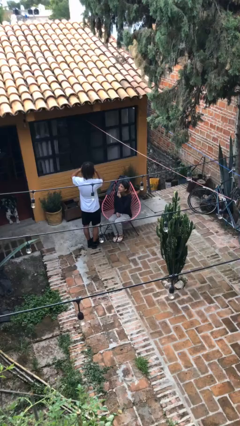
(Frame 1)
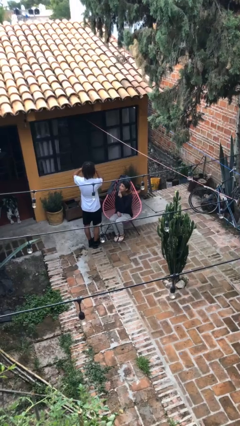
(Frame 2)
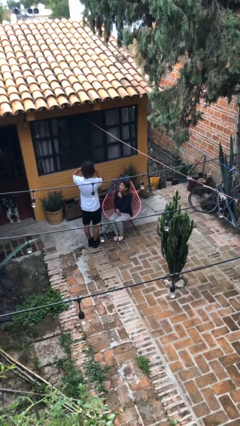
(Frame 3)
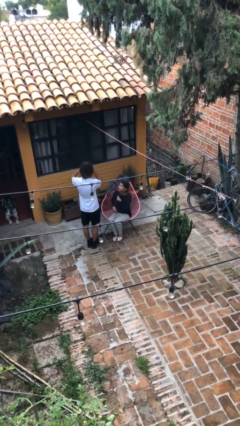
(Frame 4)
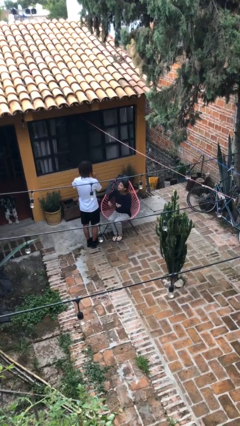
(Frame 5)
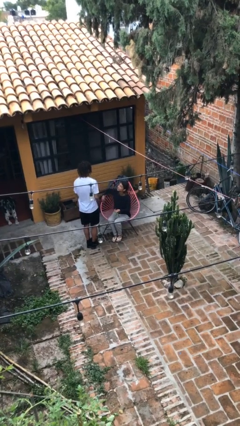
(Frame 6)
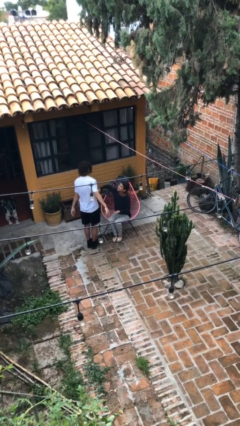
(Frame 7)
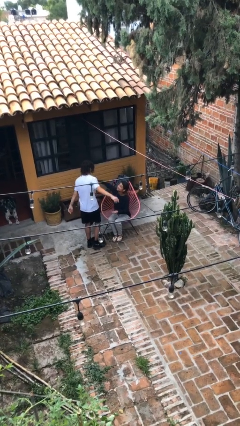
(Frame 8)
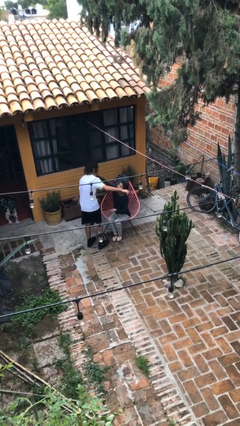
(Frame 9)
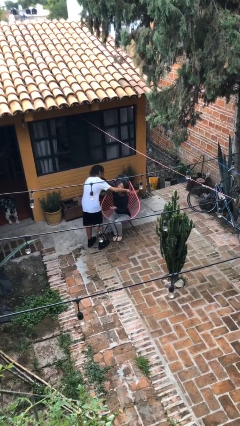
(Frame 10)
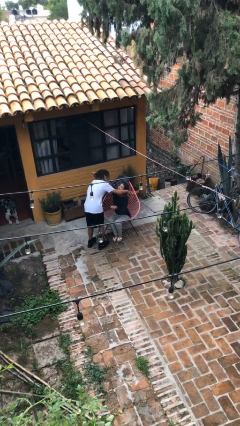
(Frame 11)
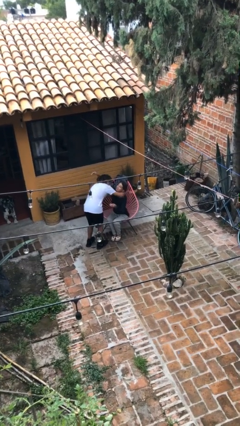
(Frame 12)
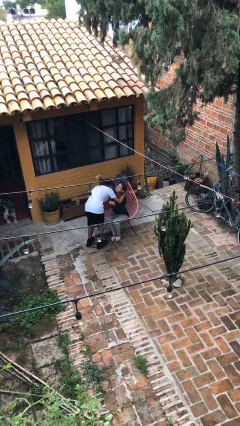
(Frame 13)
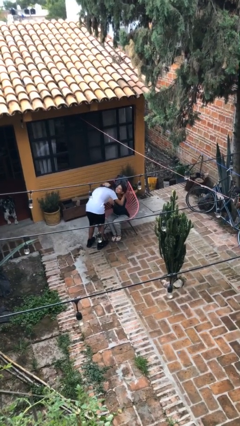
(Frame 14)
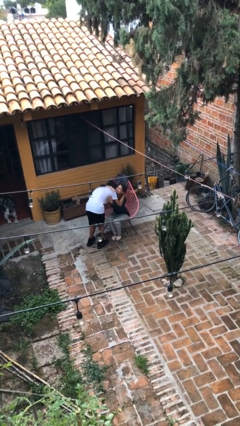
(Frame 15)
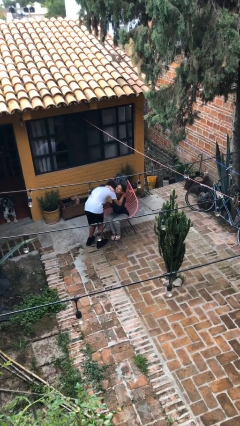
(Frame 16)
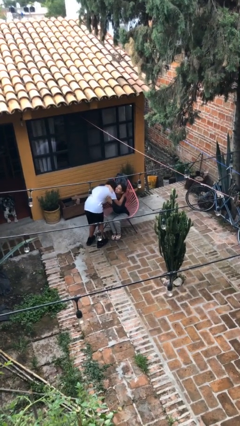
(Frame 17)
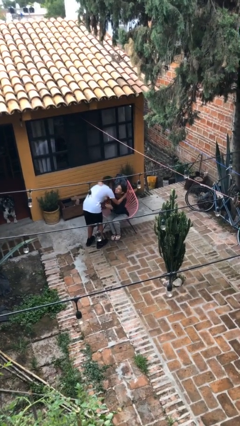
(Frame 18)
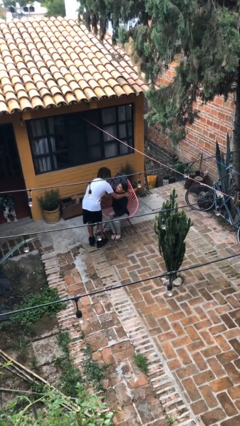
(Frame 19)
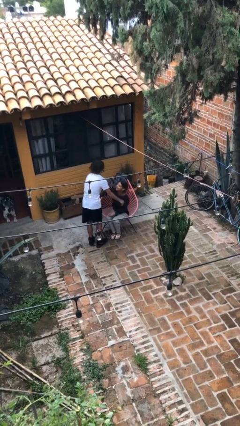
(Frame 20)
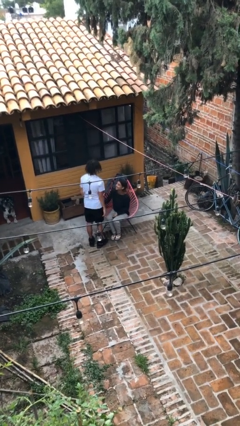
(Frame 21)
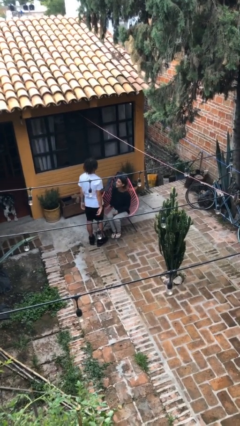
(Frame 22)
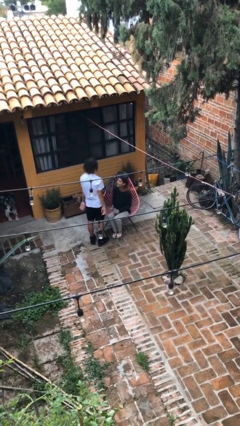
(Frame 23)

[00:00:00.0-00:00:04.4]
person embraces person

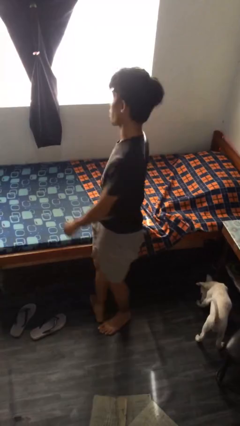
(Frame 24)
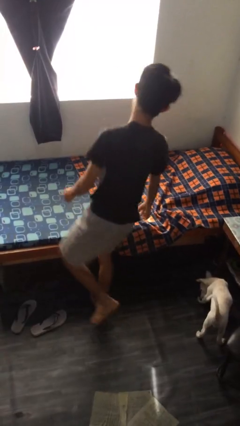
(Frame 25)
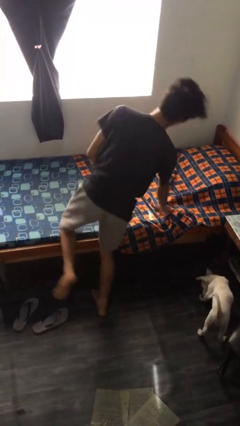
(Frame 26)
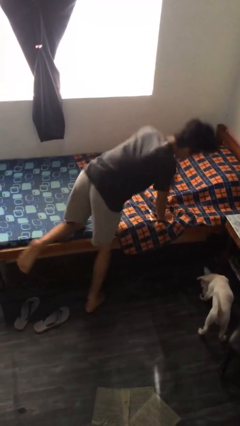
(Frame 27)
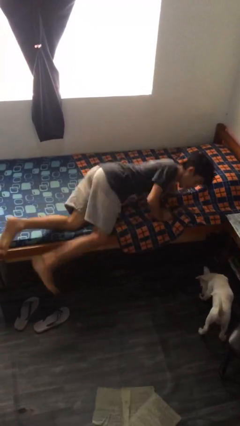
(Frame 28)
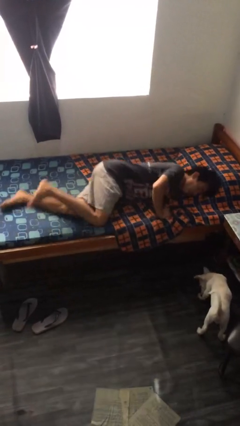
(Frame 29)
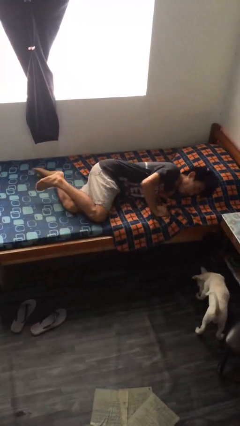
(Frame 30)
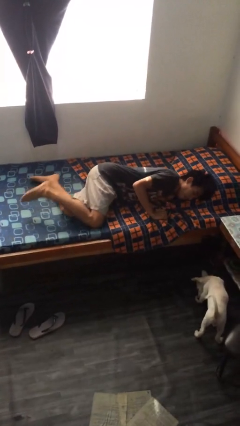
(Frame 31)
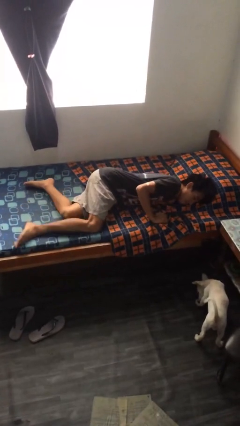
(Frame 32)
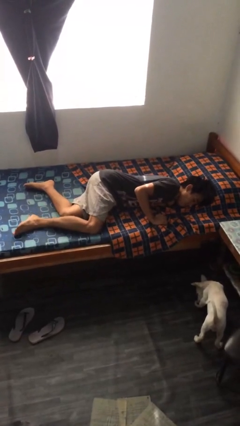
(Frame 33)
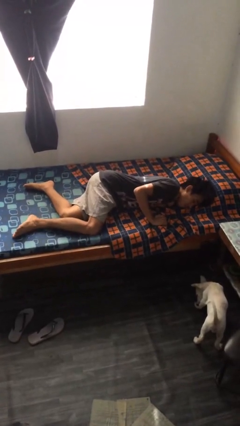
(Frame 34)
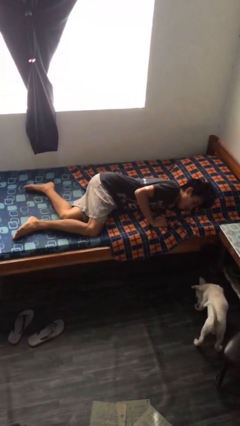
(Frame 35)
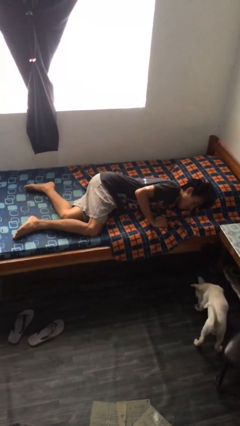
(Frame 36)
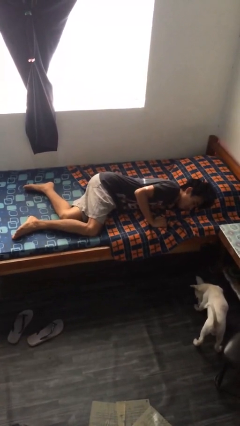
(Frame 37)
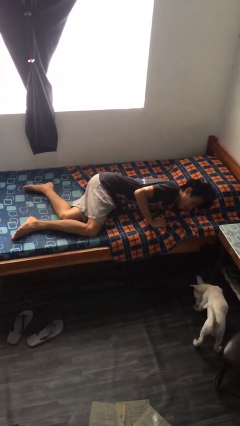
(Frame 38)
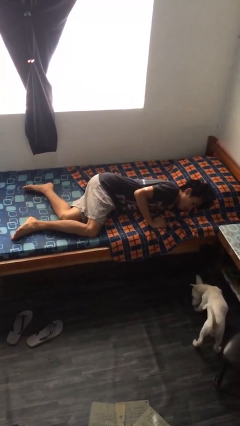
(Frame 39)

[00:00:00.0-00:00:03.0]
person lies down on bed

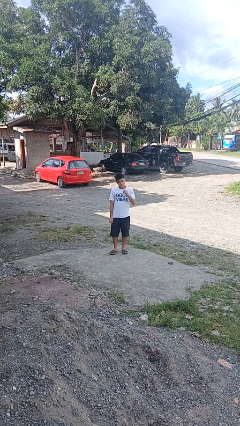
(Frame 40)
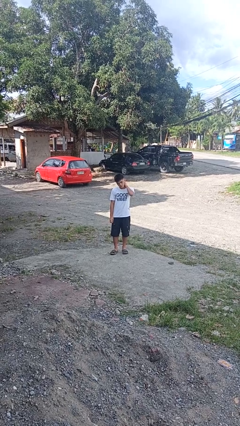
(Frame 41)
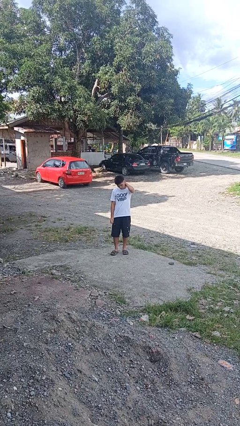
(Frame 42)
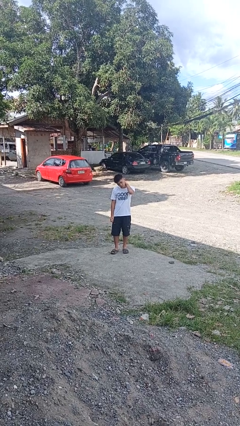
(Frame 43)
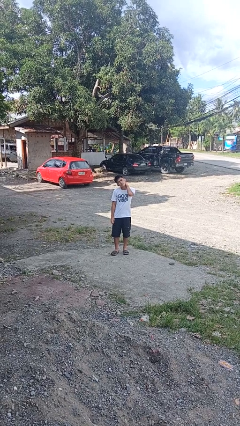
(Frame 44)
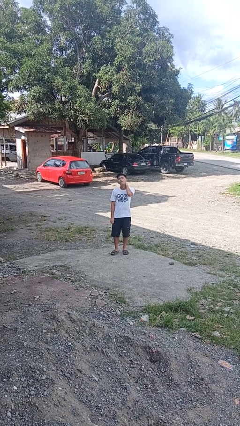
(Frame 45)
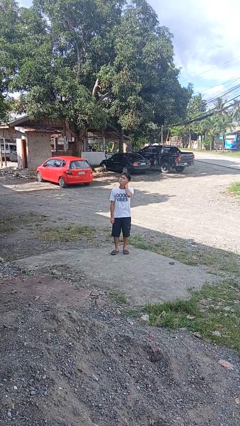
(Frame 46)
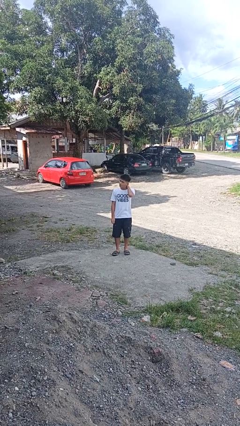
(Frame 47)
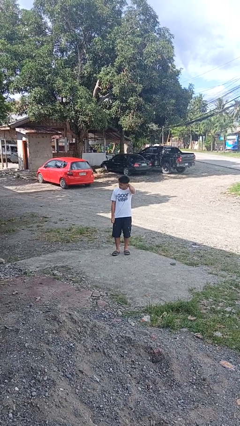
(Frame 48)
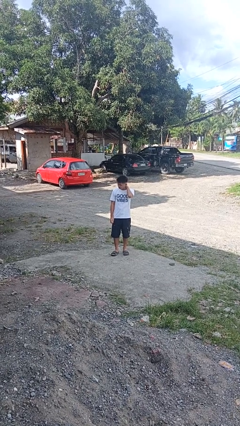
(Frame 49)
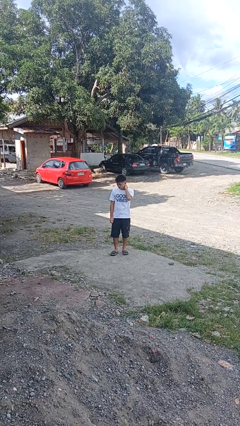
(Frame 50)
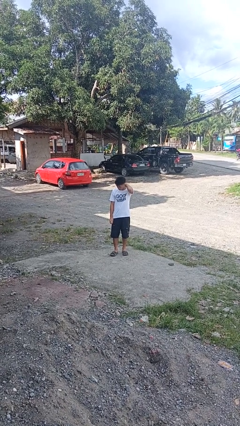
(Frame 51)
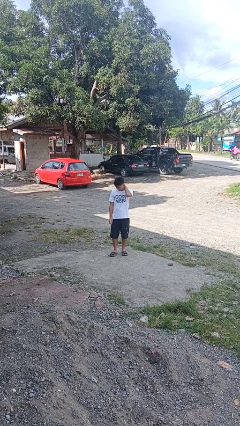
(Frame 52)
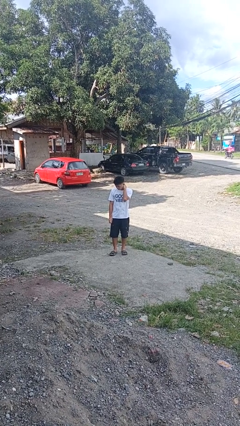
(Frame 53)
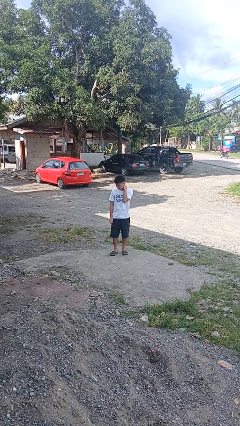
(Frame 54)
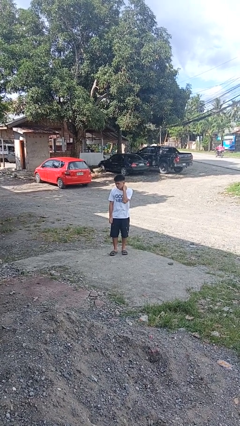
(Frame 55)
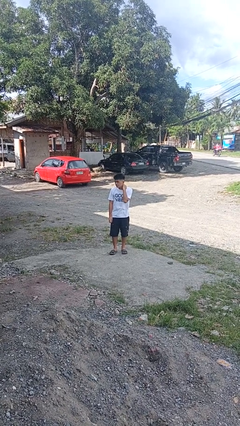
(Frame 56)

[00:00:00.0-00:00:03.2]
person rubs neck

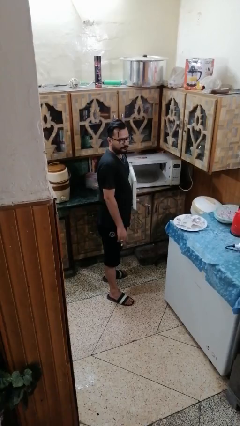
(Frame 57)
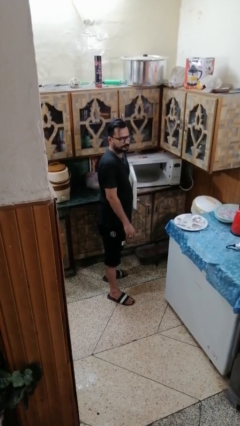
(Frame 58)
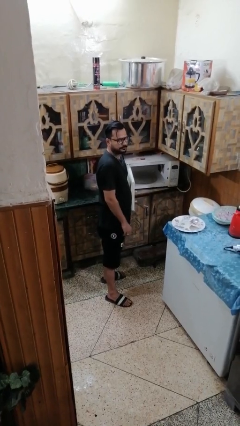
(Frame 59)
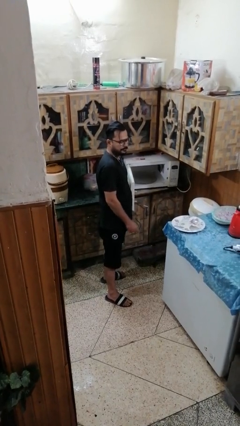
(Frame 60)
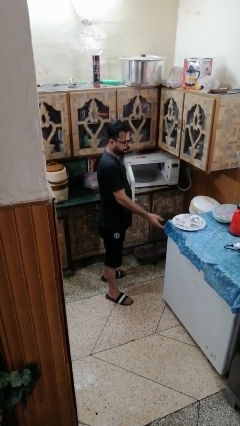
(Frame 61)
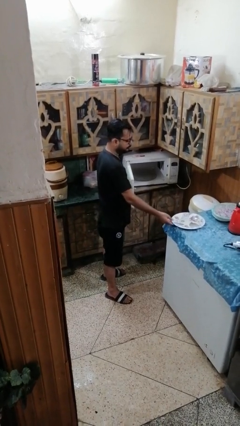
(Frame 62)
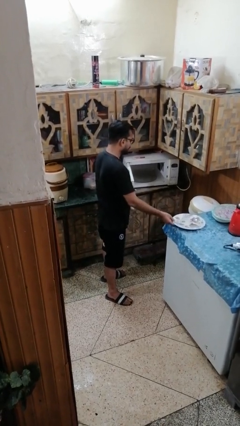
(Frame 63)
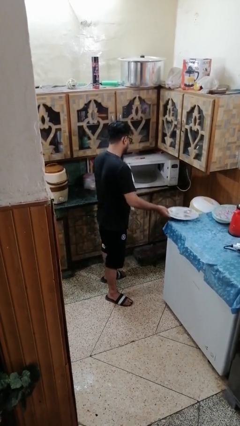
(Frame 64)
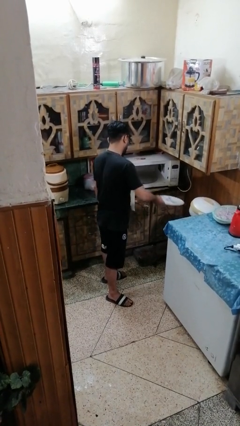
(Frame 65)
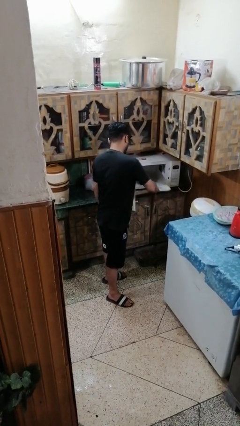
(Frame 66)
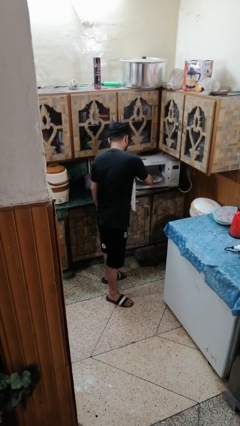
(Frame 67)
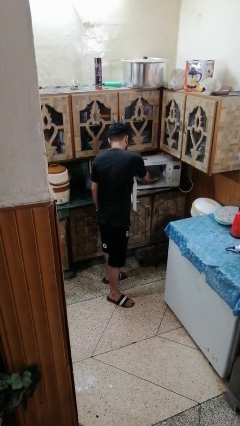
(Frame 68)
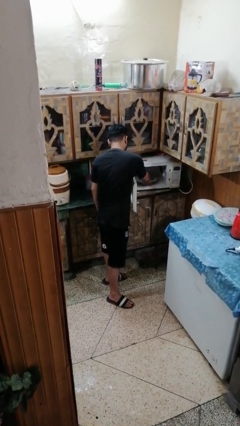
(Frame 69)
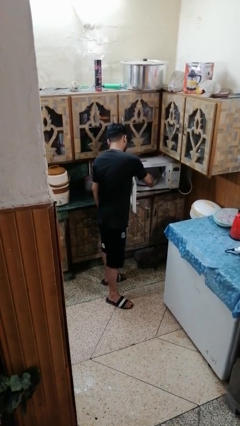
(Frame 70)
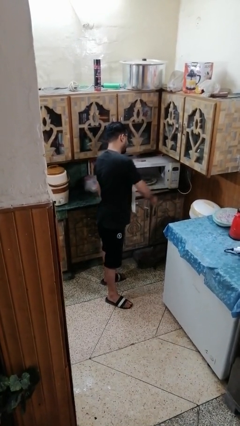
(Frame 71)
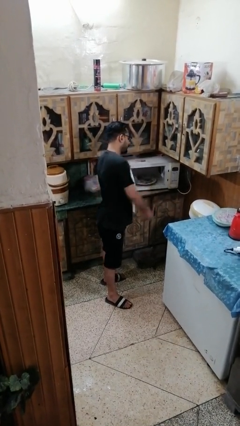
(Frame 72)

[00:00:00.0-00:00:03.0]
person puts object into microwave

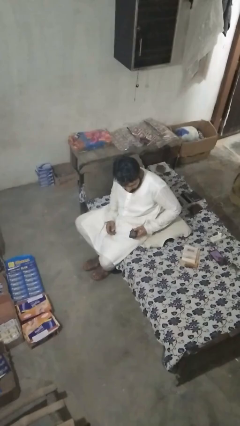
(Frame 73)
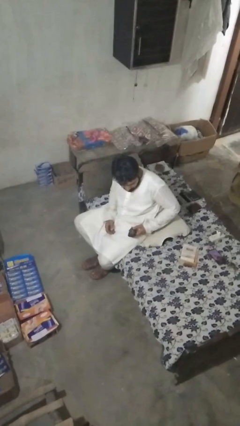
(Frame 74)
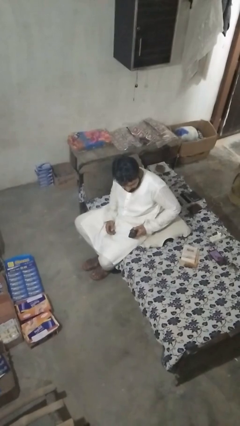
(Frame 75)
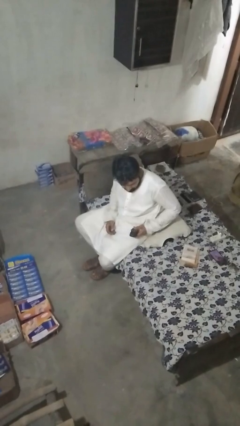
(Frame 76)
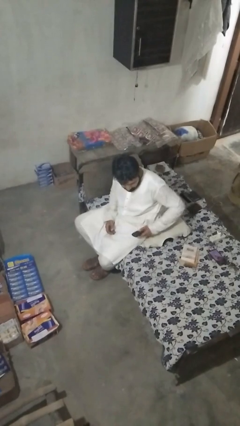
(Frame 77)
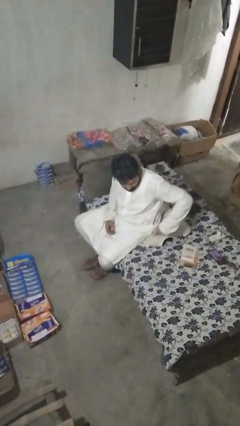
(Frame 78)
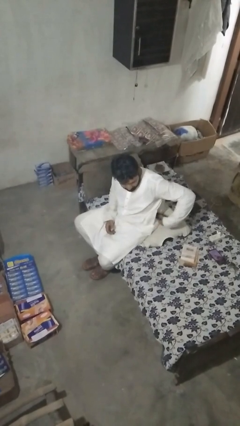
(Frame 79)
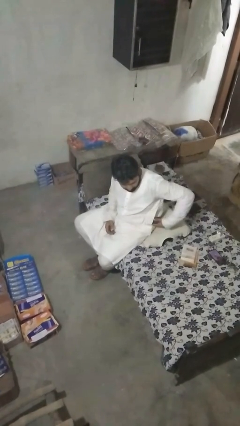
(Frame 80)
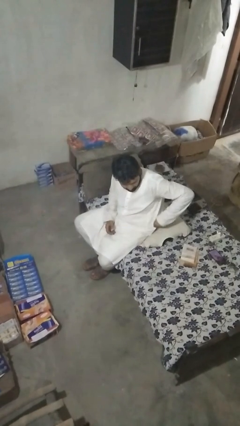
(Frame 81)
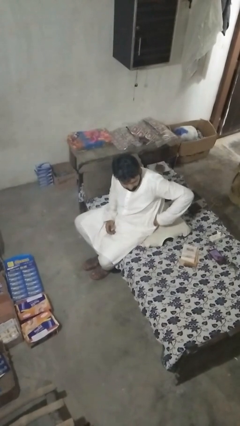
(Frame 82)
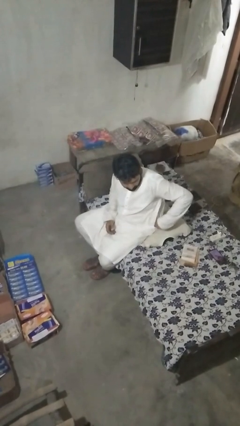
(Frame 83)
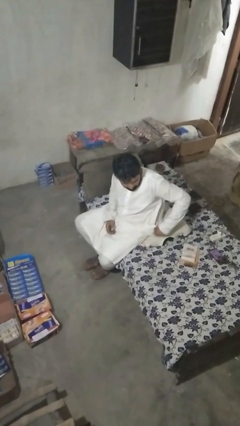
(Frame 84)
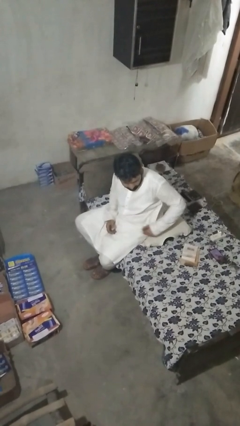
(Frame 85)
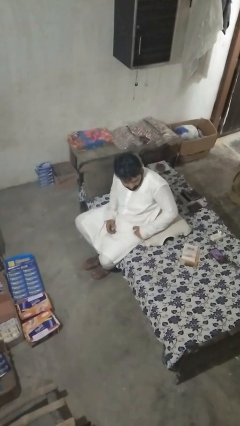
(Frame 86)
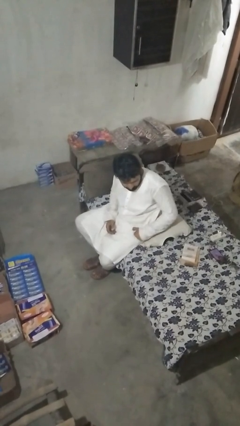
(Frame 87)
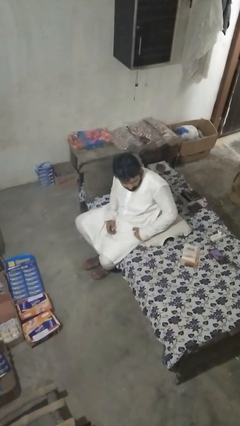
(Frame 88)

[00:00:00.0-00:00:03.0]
person puts phone into pocket

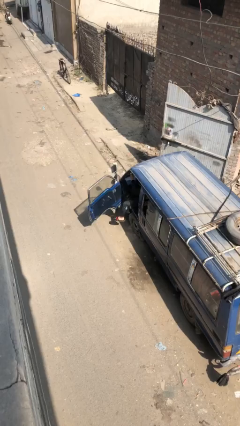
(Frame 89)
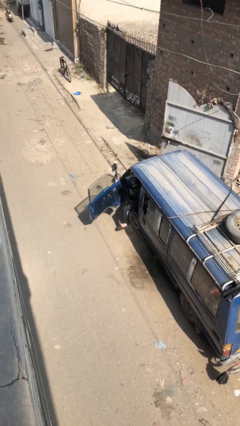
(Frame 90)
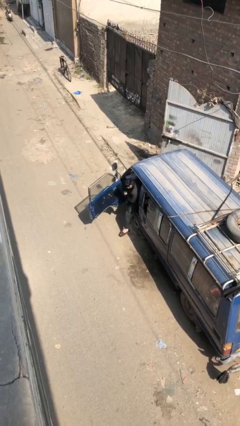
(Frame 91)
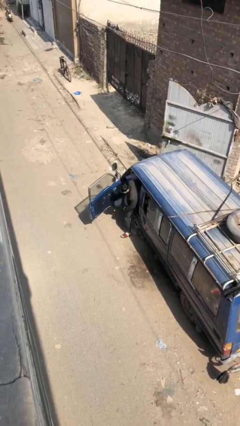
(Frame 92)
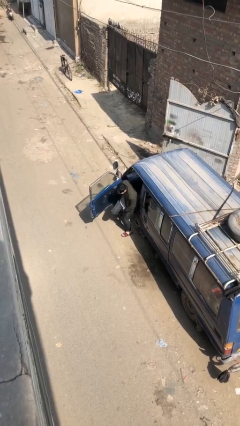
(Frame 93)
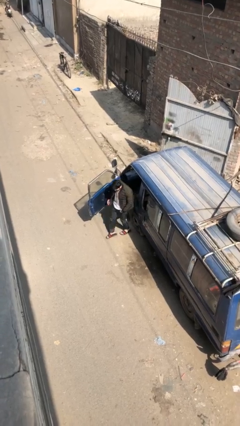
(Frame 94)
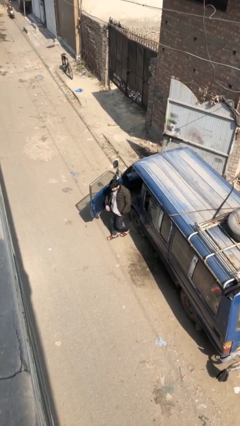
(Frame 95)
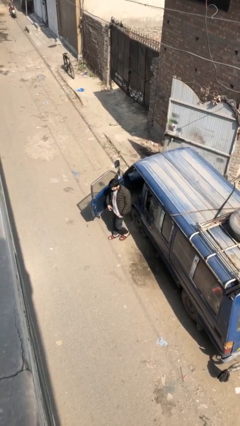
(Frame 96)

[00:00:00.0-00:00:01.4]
person exits car
